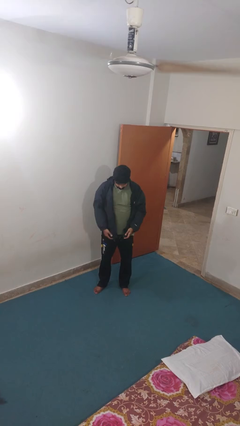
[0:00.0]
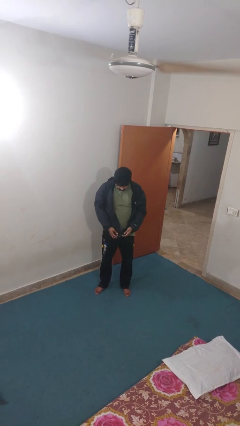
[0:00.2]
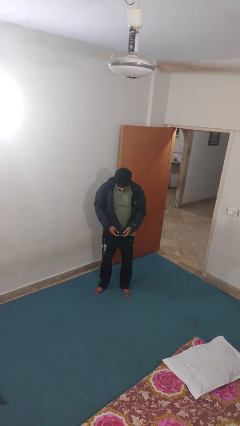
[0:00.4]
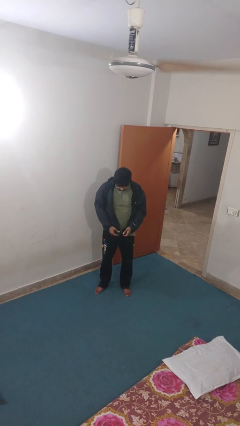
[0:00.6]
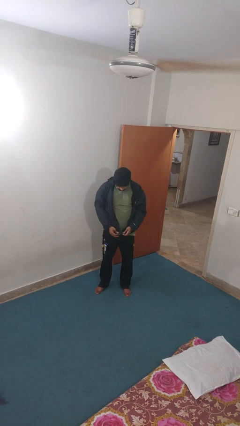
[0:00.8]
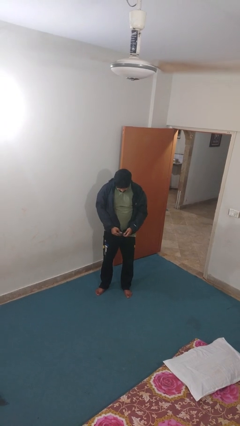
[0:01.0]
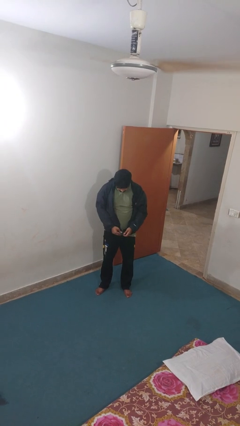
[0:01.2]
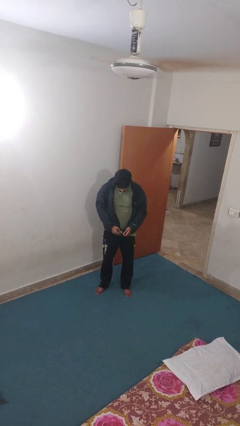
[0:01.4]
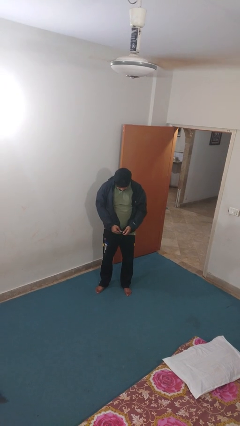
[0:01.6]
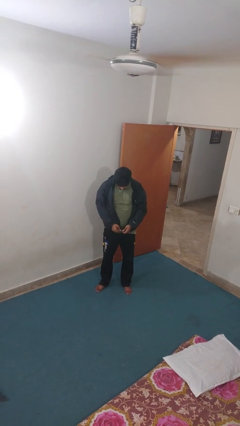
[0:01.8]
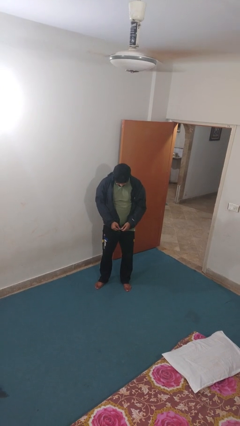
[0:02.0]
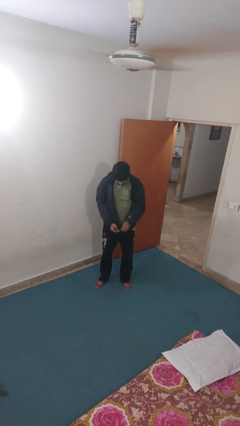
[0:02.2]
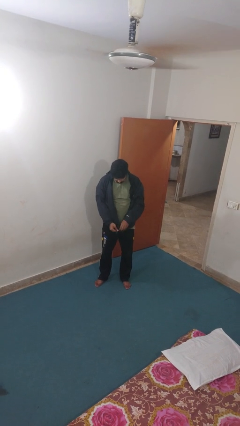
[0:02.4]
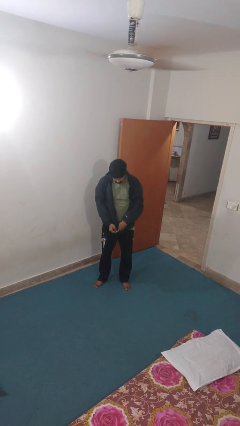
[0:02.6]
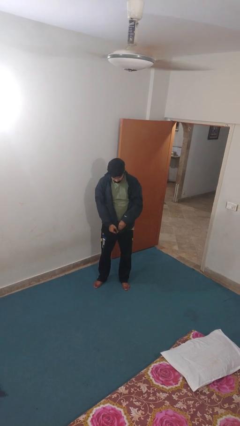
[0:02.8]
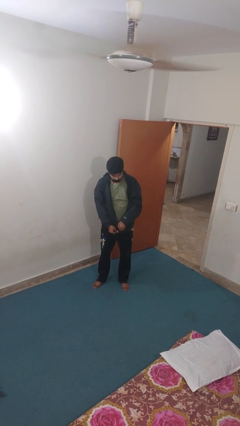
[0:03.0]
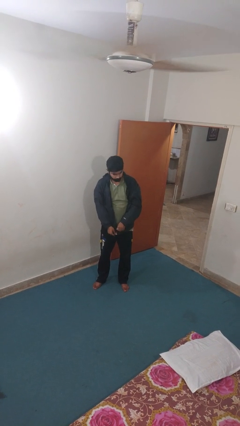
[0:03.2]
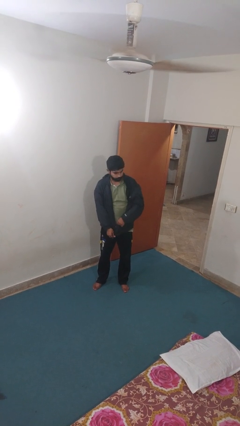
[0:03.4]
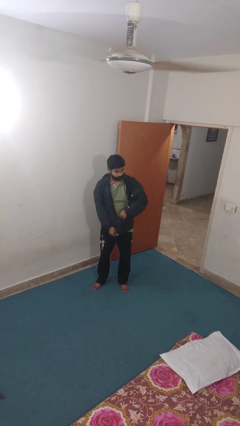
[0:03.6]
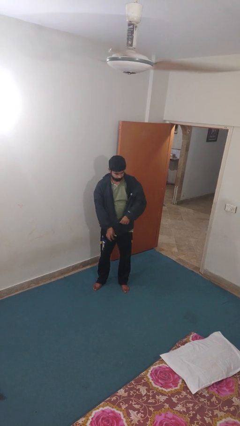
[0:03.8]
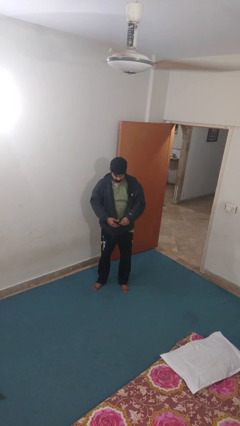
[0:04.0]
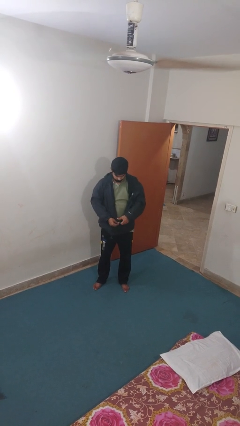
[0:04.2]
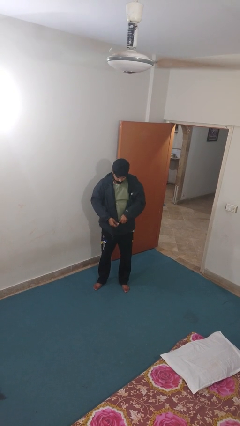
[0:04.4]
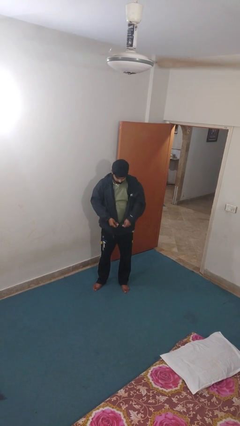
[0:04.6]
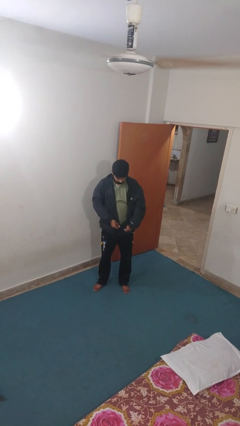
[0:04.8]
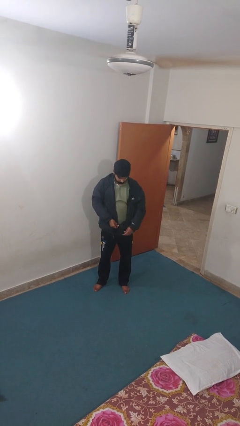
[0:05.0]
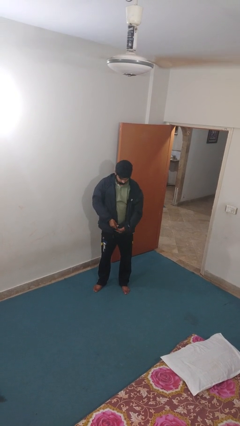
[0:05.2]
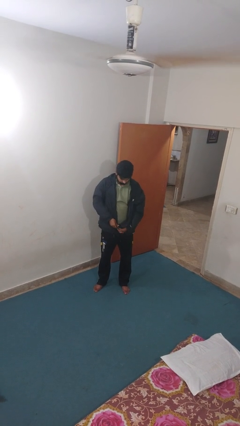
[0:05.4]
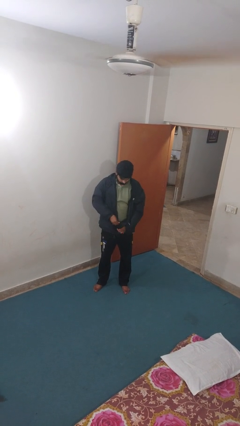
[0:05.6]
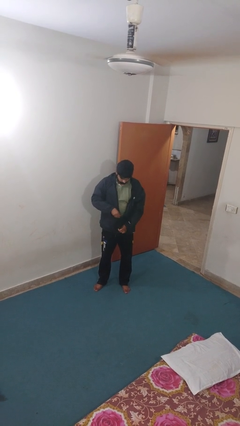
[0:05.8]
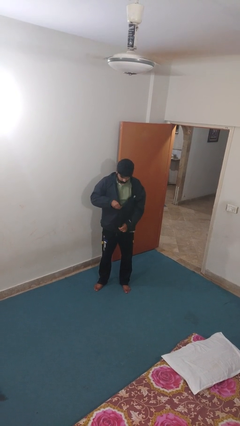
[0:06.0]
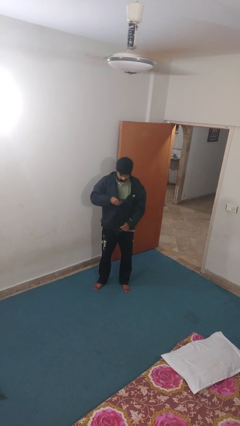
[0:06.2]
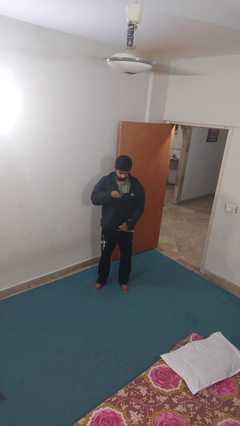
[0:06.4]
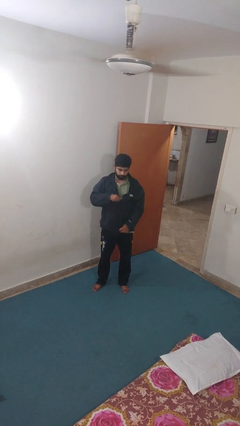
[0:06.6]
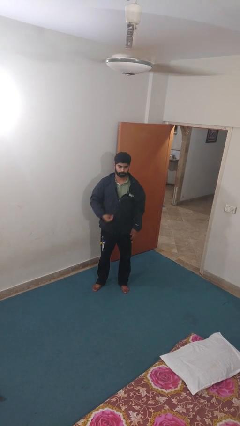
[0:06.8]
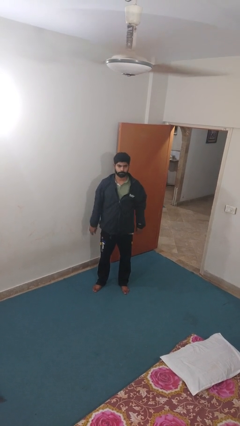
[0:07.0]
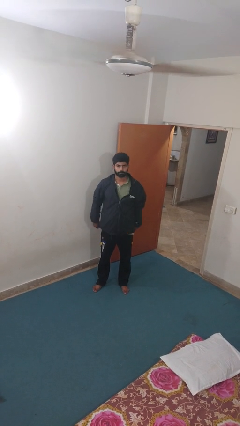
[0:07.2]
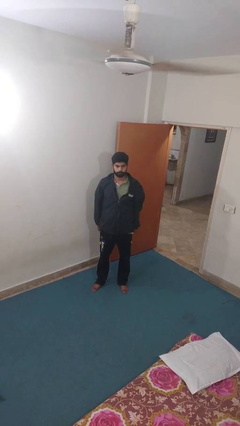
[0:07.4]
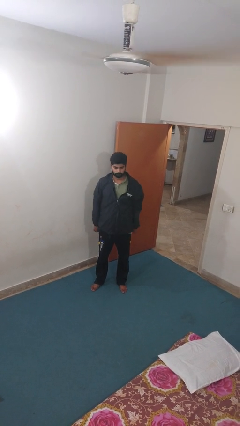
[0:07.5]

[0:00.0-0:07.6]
person zips up jacket

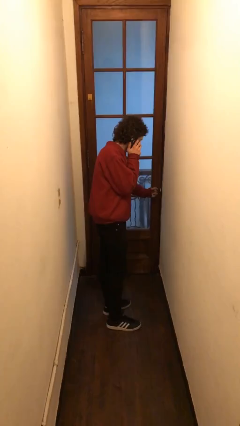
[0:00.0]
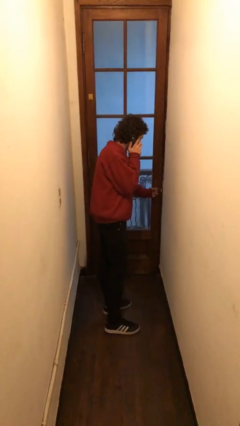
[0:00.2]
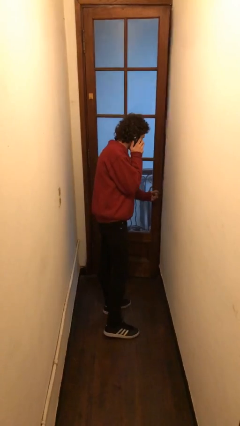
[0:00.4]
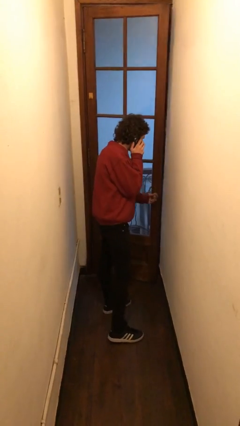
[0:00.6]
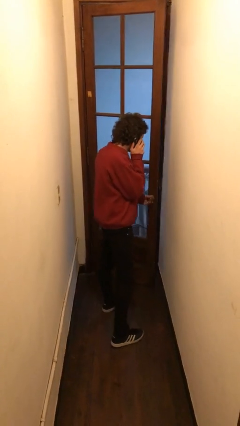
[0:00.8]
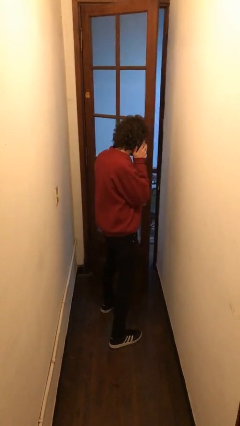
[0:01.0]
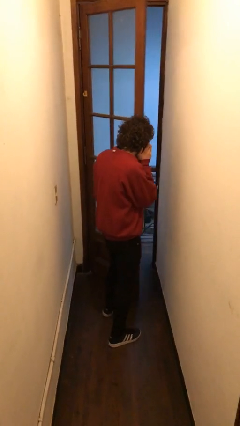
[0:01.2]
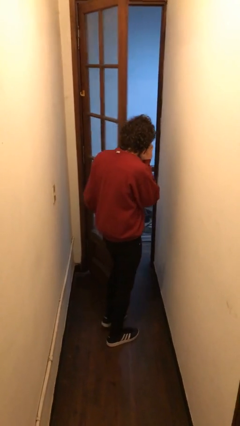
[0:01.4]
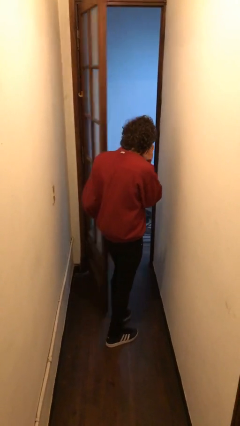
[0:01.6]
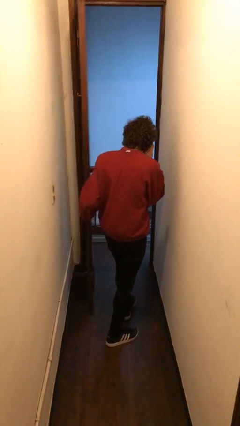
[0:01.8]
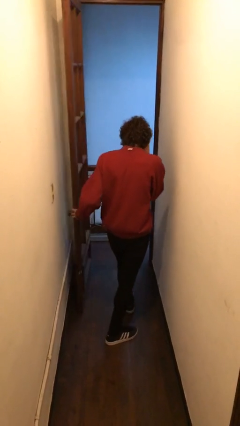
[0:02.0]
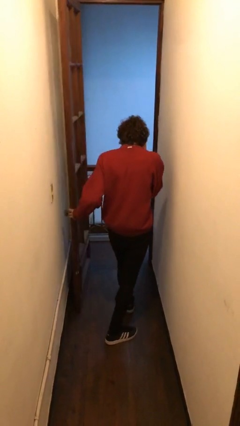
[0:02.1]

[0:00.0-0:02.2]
person opens facility door

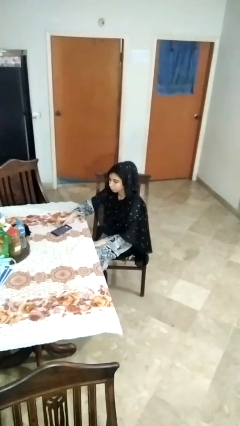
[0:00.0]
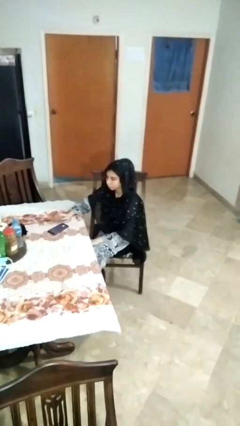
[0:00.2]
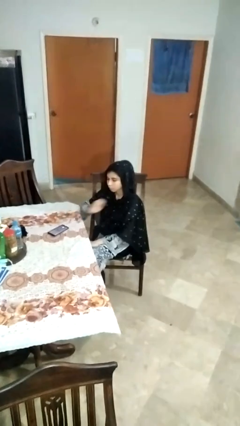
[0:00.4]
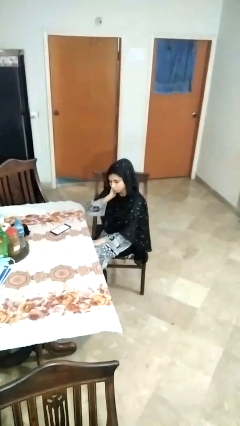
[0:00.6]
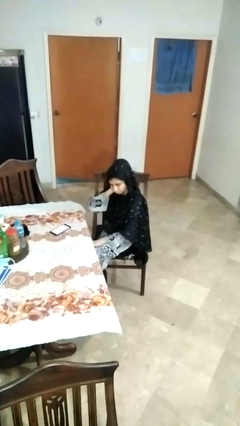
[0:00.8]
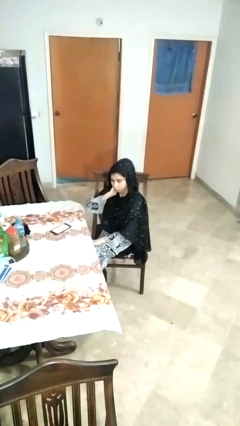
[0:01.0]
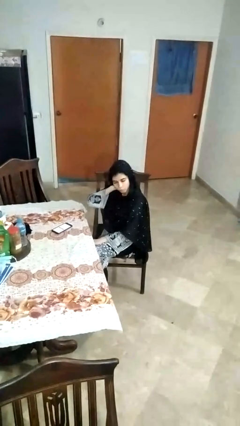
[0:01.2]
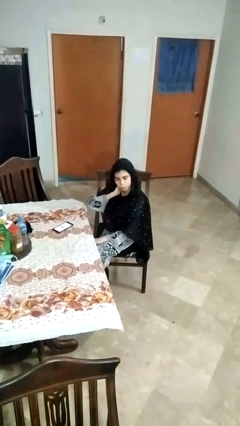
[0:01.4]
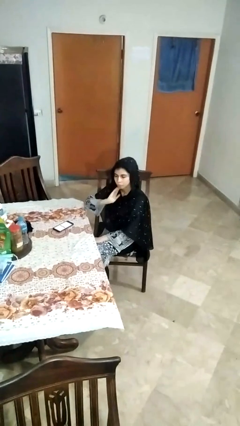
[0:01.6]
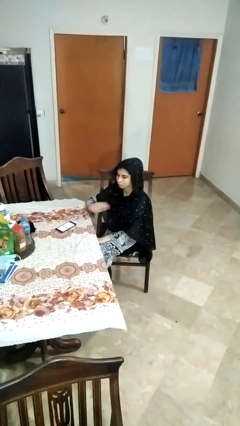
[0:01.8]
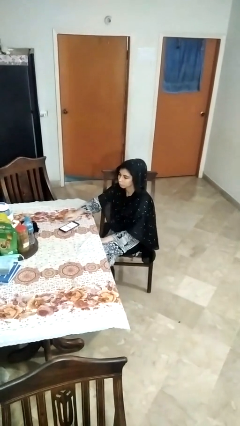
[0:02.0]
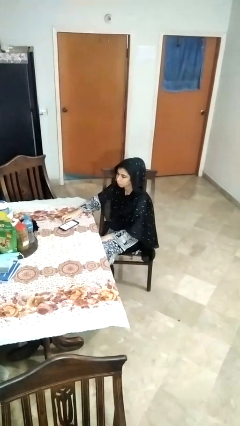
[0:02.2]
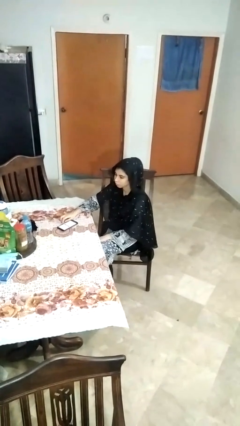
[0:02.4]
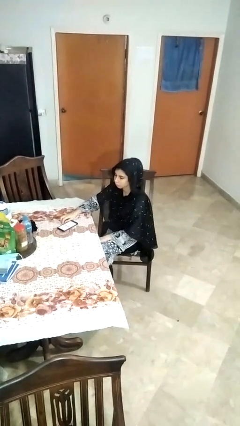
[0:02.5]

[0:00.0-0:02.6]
person rubs neck

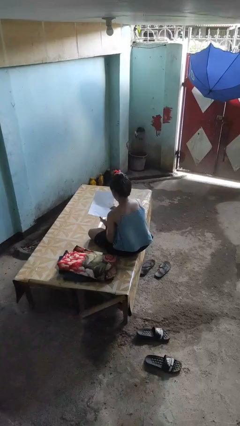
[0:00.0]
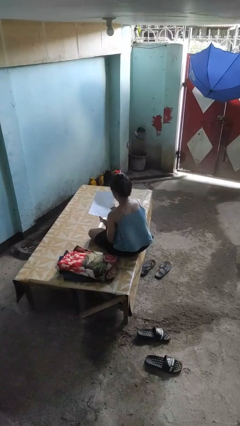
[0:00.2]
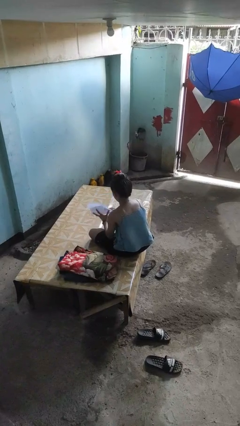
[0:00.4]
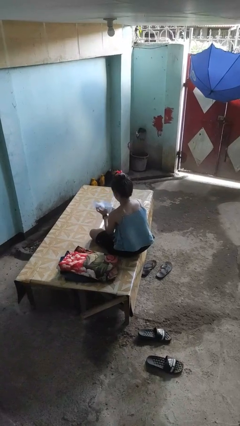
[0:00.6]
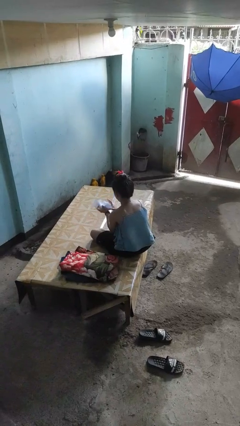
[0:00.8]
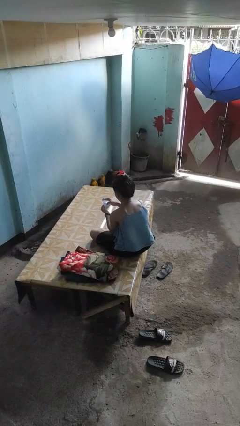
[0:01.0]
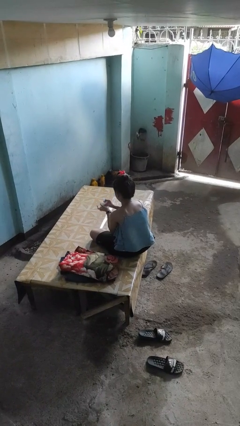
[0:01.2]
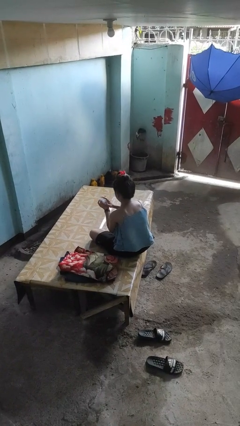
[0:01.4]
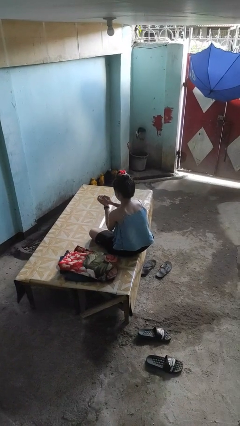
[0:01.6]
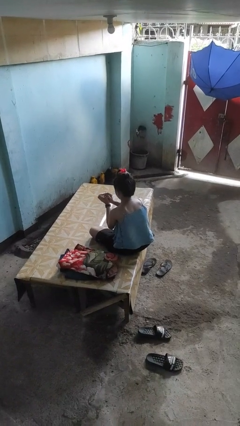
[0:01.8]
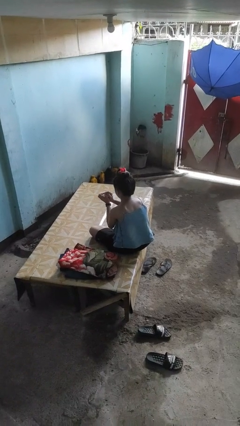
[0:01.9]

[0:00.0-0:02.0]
person crumples paper

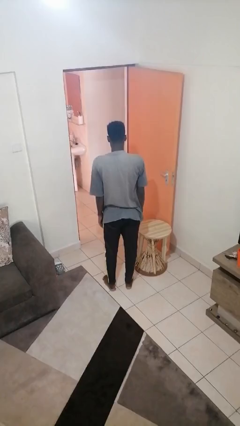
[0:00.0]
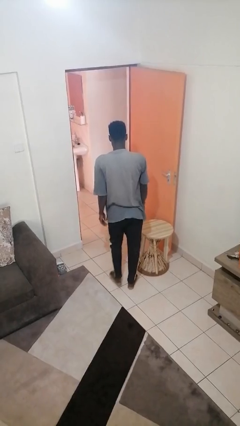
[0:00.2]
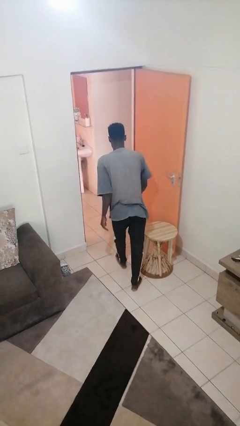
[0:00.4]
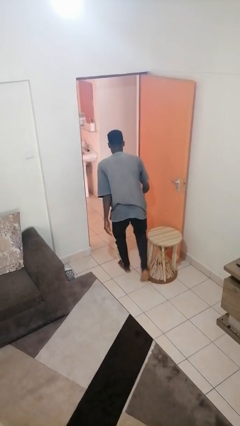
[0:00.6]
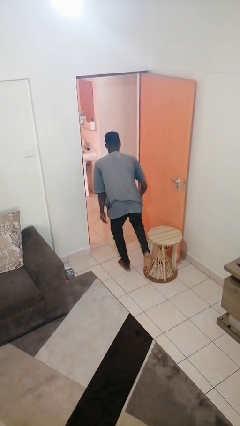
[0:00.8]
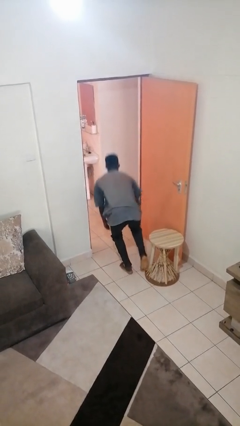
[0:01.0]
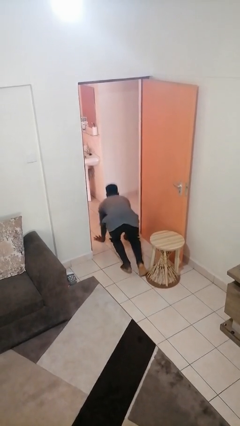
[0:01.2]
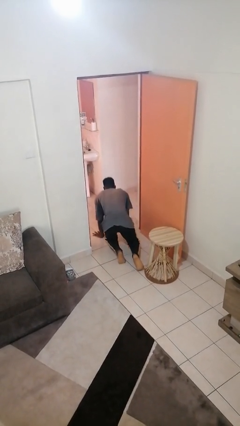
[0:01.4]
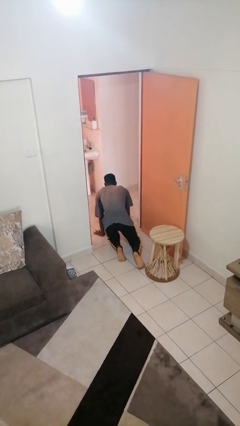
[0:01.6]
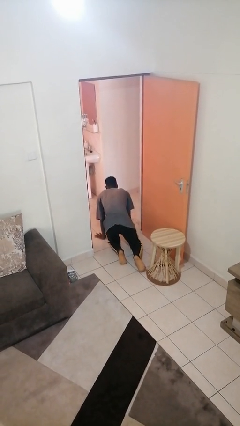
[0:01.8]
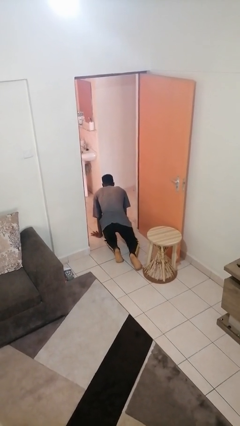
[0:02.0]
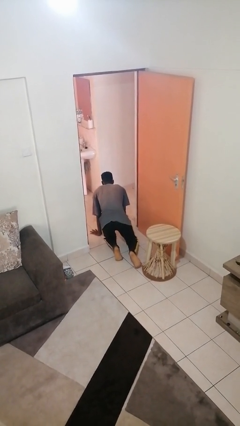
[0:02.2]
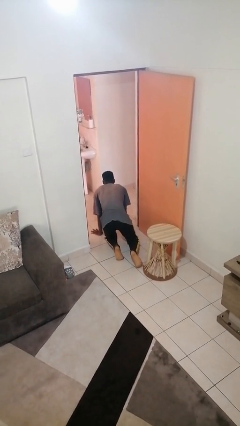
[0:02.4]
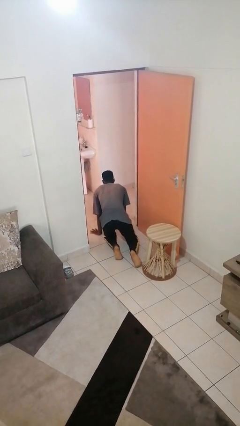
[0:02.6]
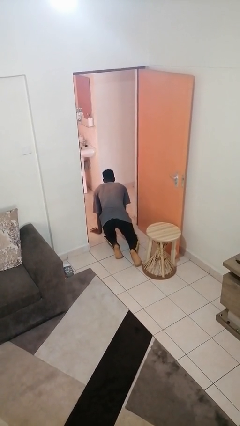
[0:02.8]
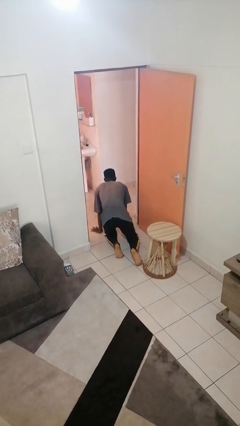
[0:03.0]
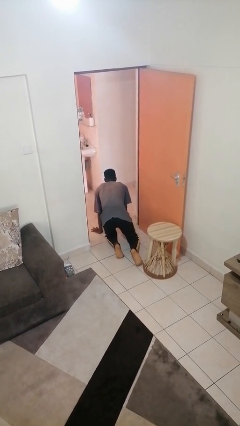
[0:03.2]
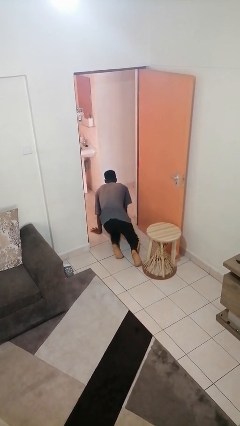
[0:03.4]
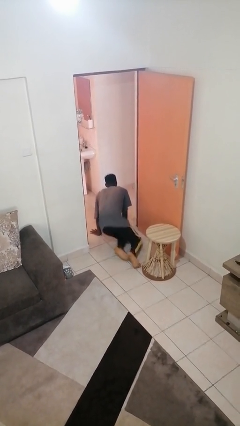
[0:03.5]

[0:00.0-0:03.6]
person trips on object on floor
